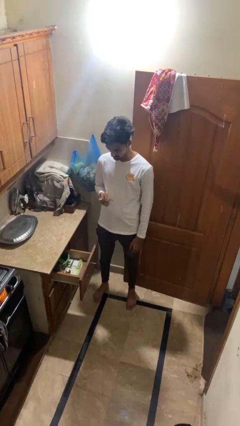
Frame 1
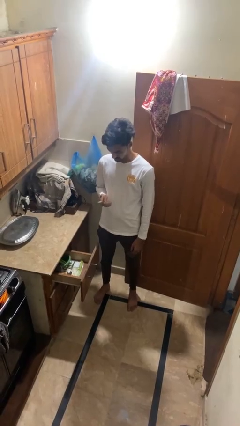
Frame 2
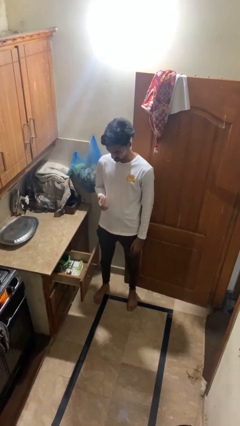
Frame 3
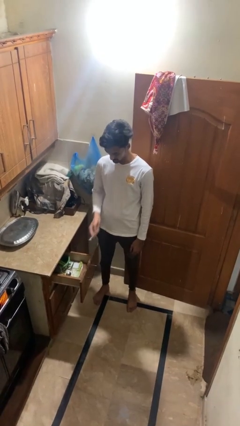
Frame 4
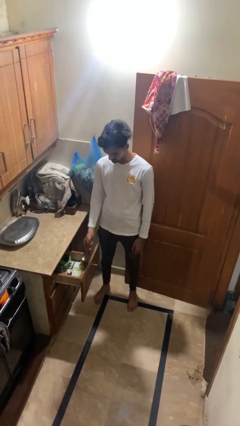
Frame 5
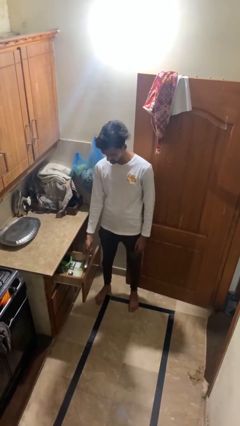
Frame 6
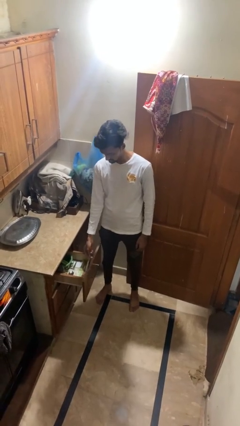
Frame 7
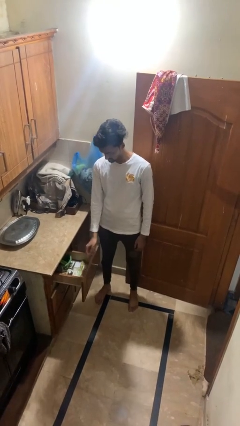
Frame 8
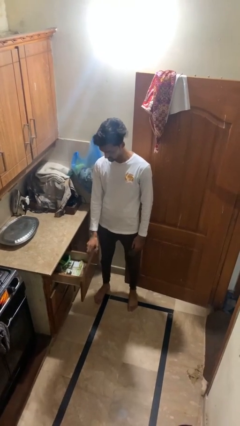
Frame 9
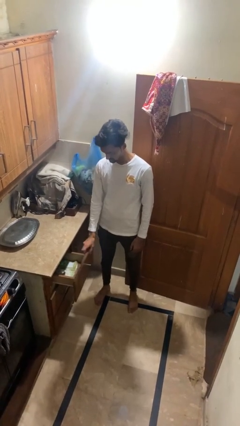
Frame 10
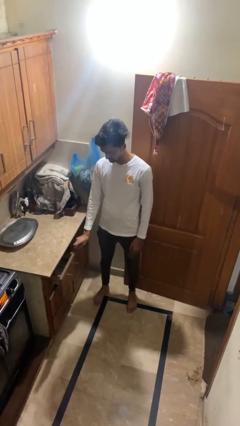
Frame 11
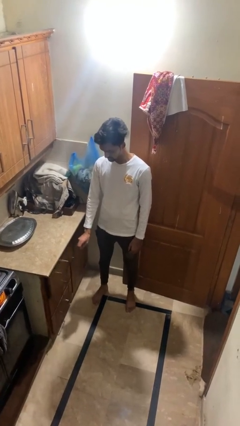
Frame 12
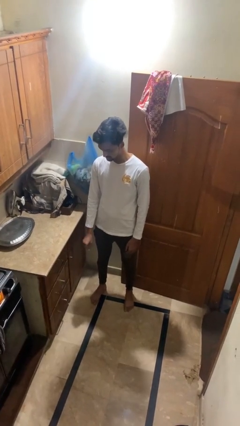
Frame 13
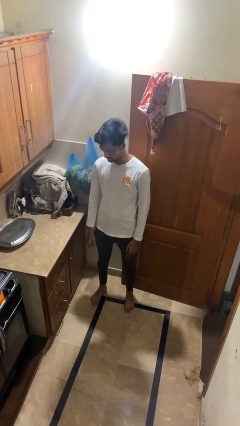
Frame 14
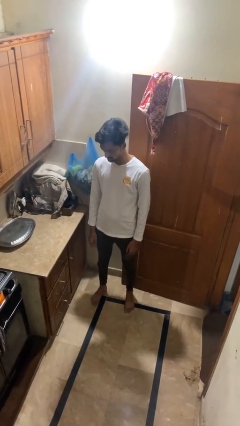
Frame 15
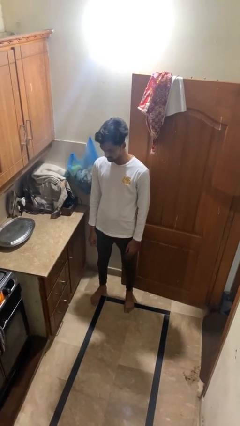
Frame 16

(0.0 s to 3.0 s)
person puts object into kitchen drawer

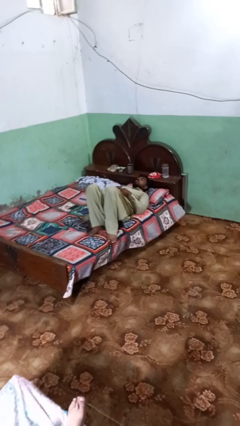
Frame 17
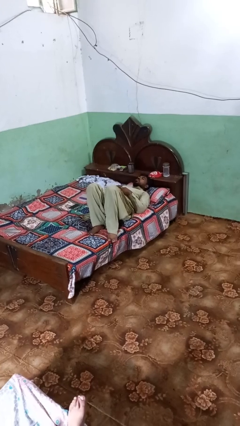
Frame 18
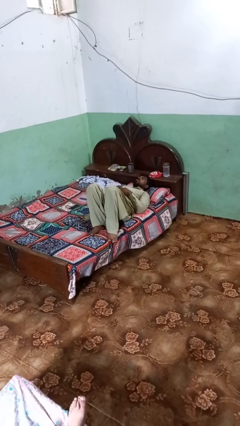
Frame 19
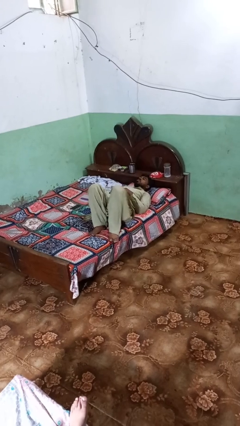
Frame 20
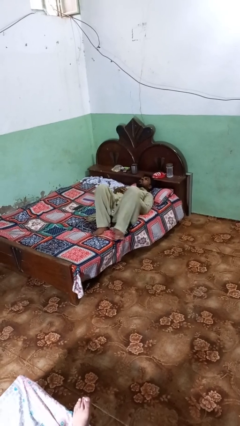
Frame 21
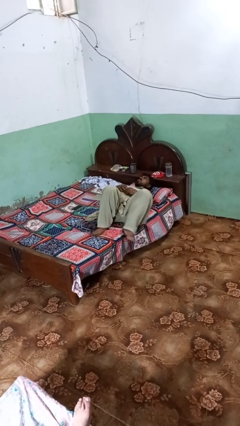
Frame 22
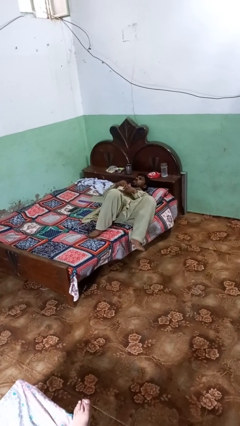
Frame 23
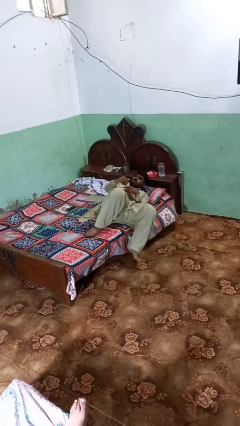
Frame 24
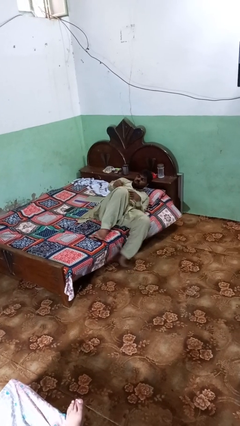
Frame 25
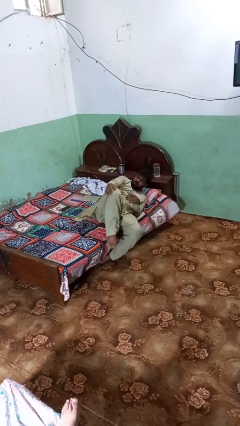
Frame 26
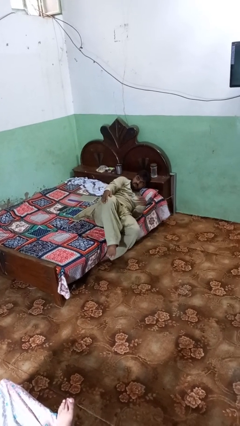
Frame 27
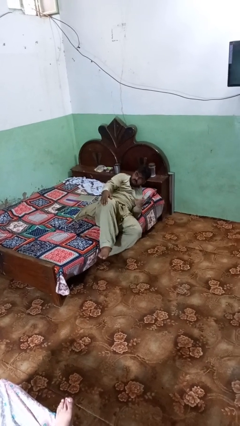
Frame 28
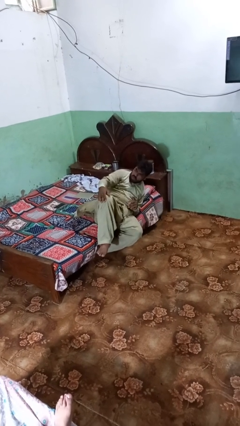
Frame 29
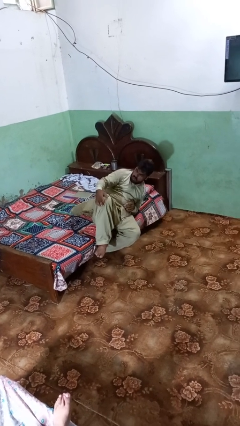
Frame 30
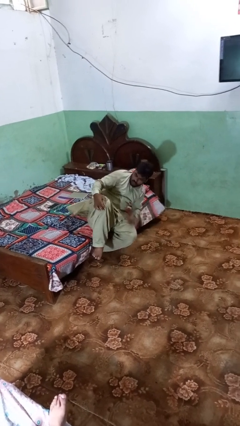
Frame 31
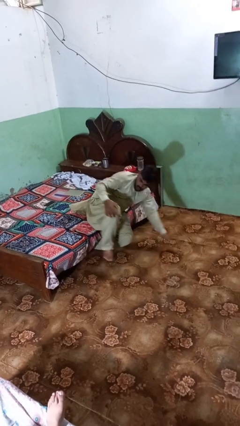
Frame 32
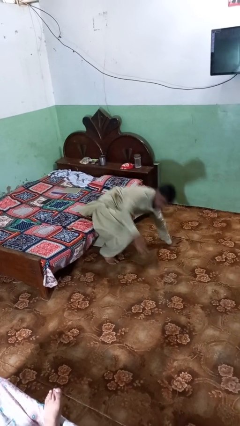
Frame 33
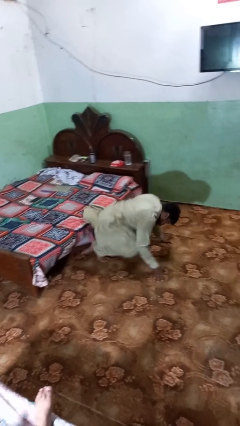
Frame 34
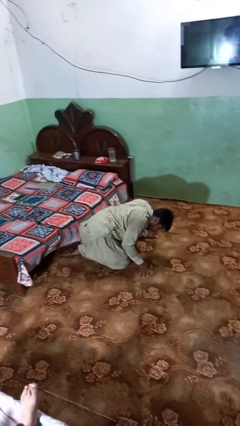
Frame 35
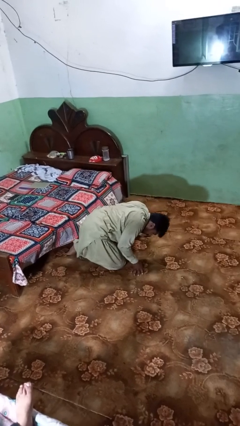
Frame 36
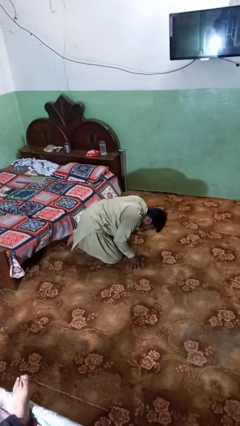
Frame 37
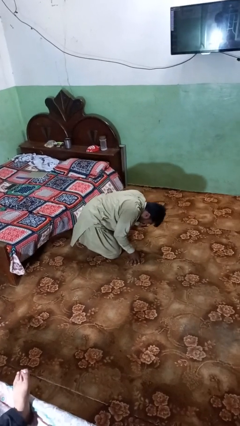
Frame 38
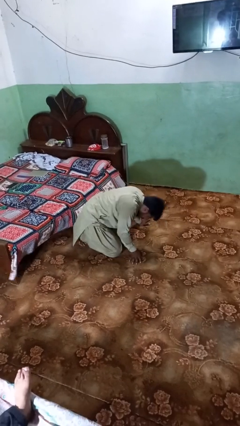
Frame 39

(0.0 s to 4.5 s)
person falls from bed

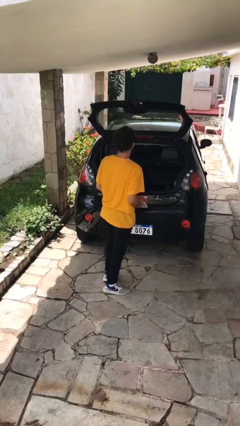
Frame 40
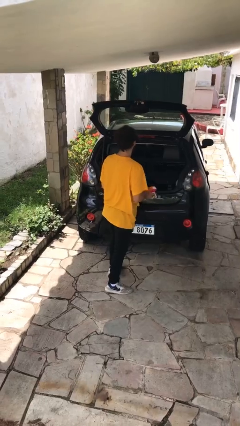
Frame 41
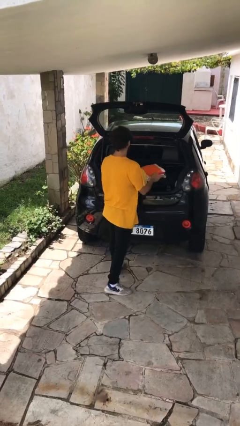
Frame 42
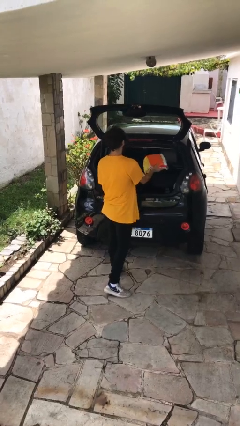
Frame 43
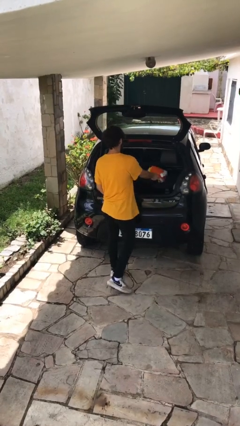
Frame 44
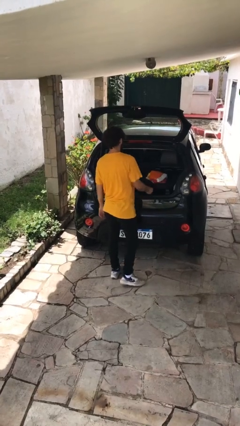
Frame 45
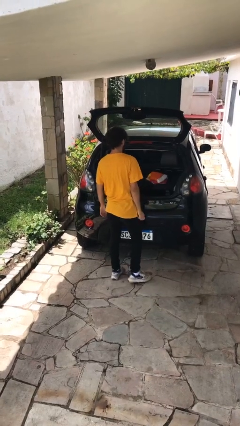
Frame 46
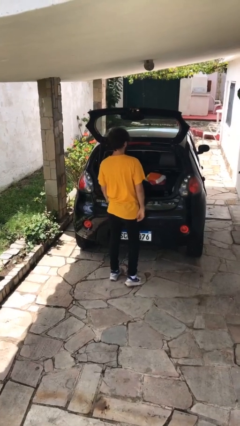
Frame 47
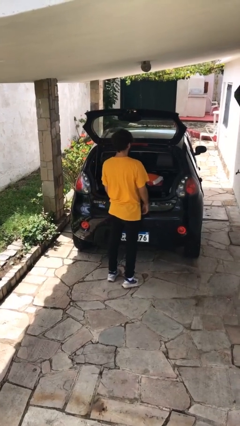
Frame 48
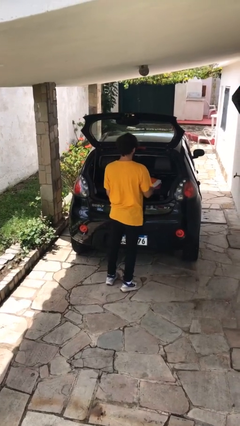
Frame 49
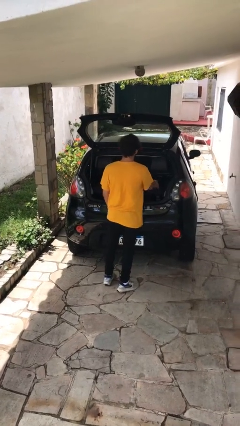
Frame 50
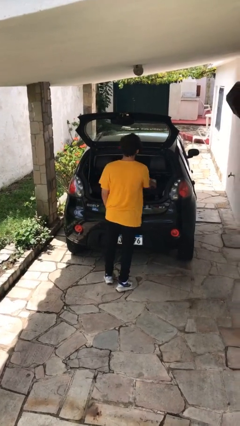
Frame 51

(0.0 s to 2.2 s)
person loads car

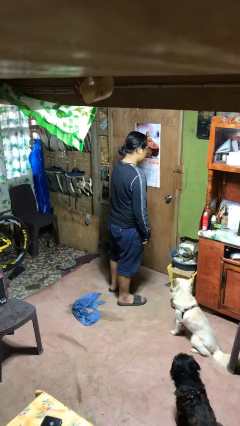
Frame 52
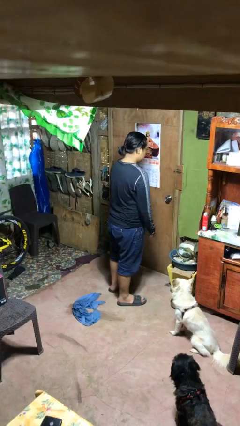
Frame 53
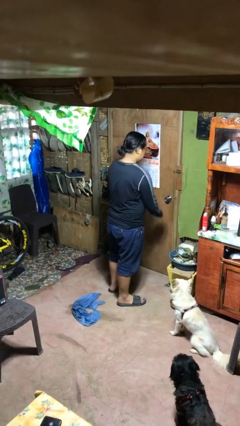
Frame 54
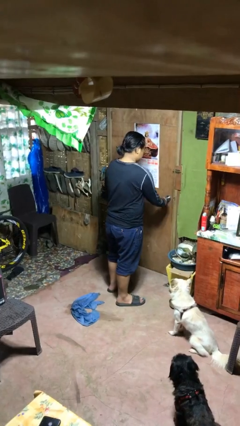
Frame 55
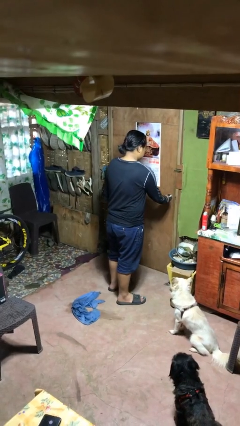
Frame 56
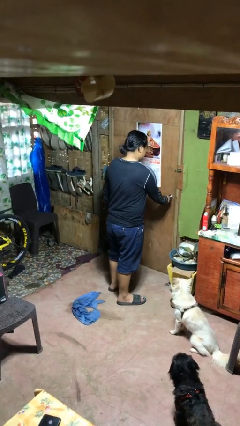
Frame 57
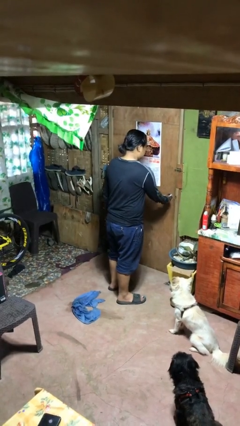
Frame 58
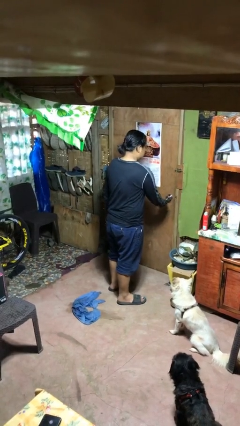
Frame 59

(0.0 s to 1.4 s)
person locks door with keys

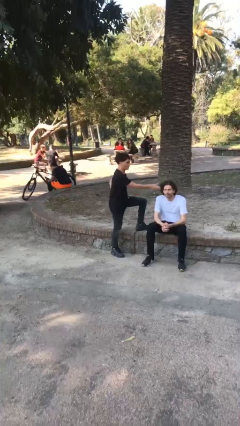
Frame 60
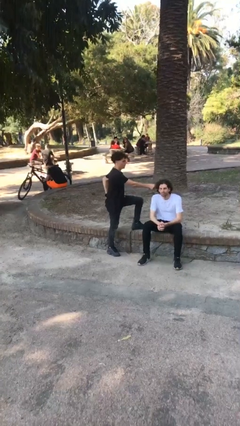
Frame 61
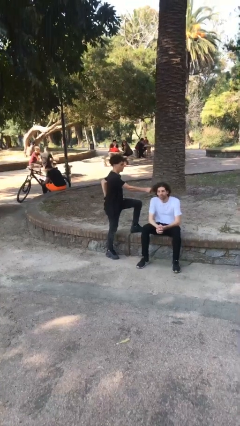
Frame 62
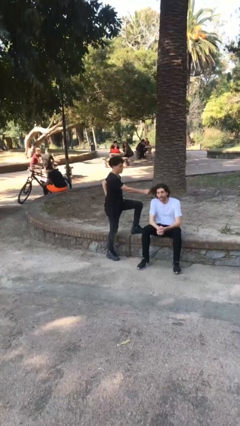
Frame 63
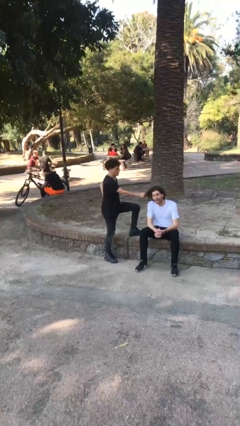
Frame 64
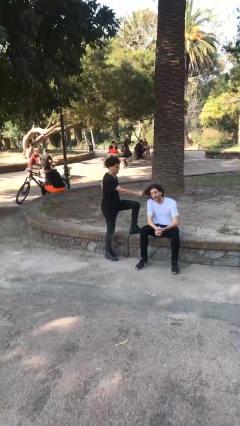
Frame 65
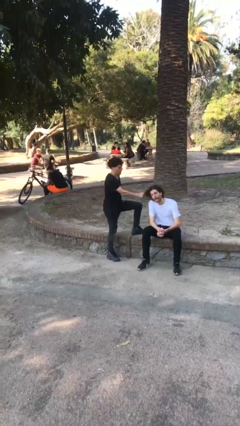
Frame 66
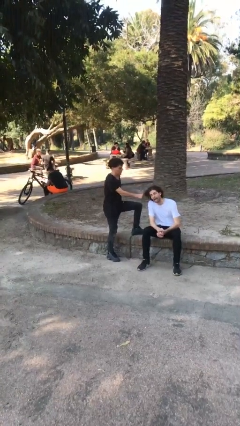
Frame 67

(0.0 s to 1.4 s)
person grabs person by hair

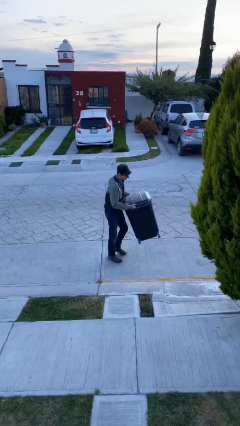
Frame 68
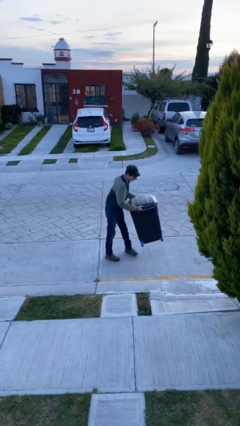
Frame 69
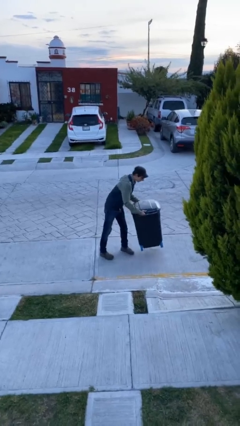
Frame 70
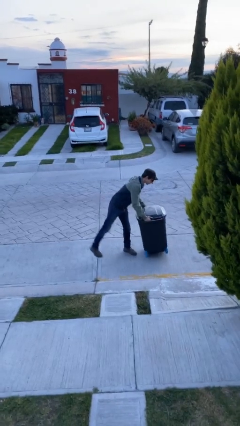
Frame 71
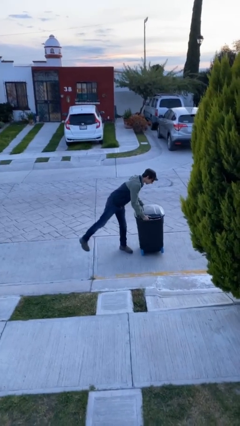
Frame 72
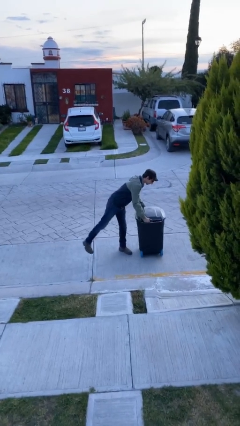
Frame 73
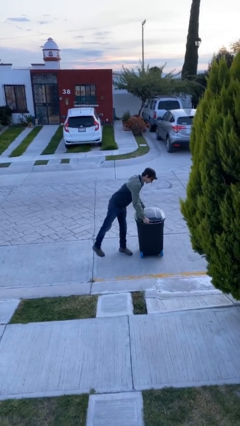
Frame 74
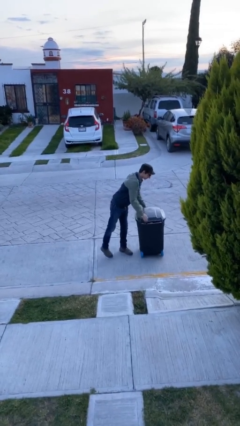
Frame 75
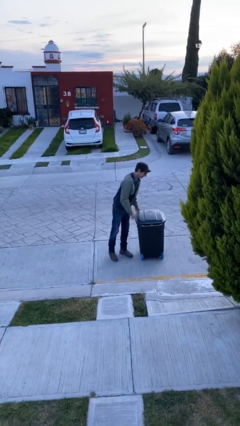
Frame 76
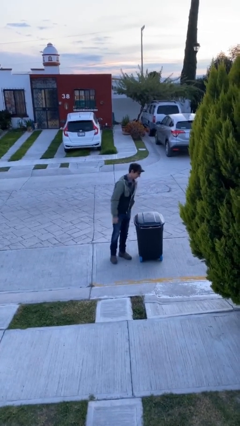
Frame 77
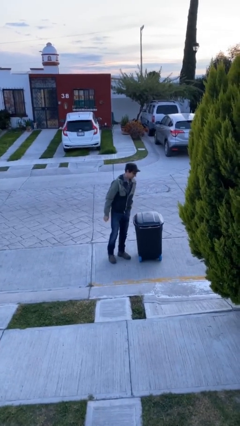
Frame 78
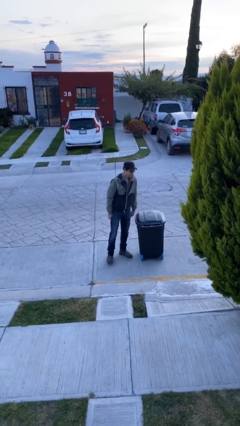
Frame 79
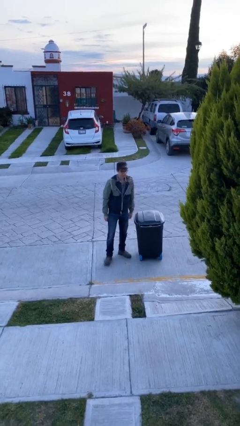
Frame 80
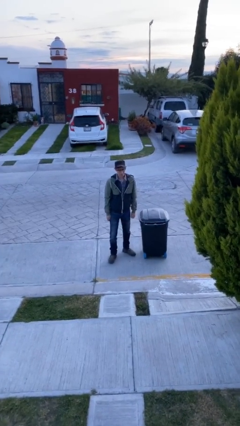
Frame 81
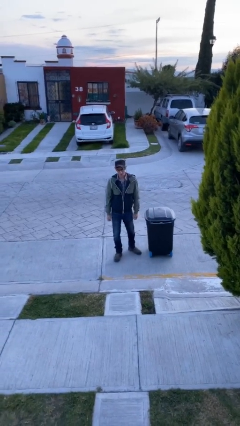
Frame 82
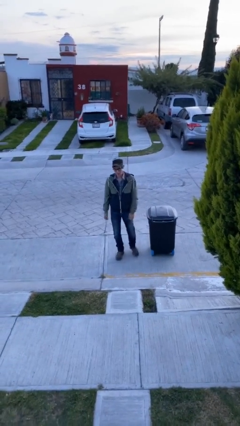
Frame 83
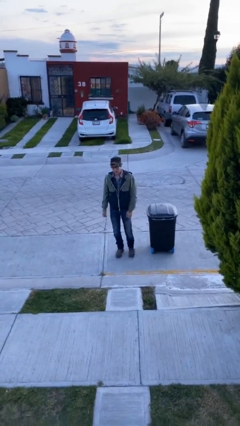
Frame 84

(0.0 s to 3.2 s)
person puts down object on floor

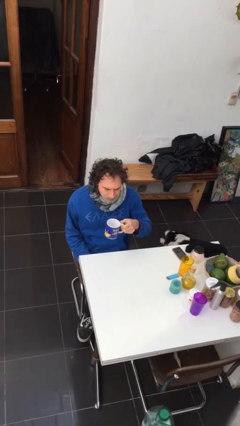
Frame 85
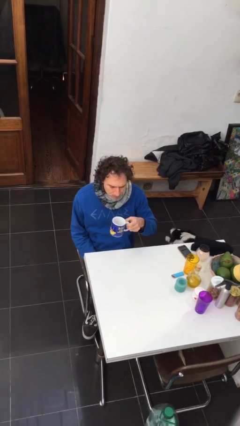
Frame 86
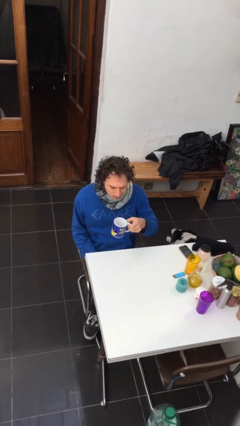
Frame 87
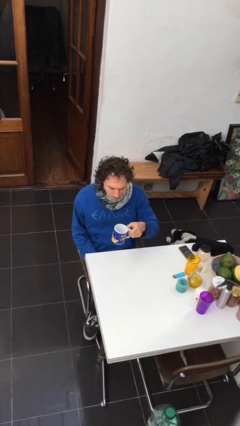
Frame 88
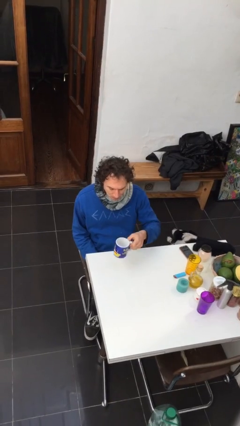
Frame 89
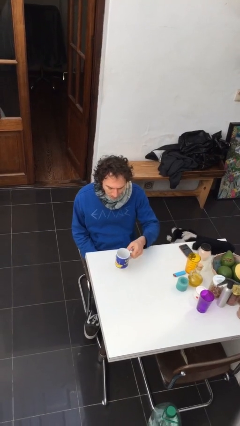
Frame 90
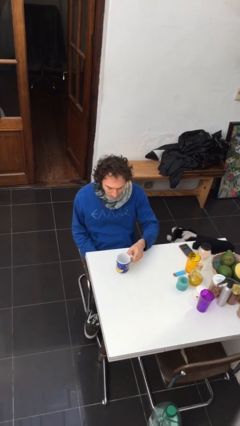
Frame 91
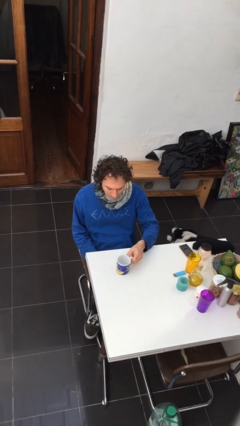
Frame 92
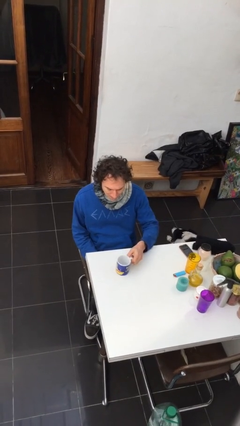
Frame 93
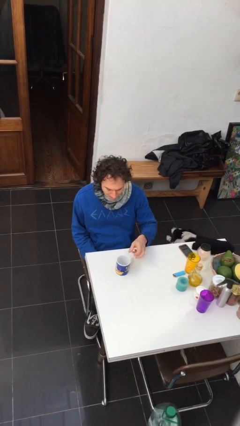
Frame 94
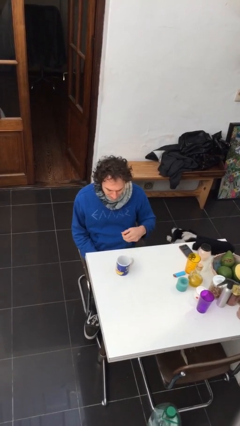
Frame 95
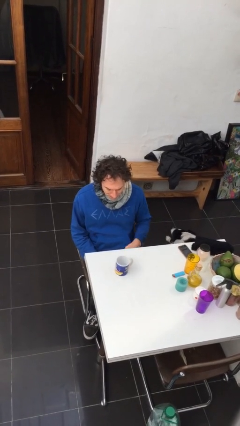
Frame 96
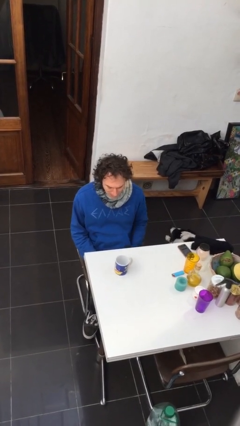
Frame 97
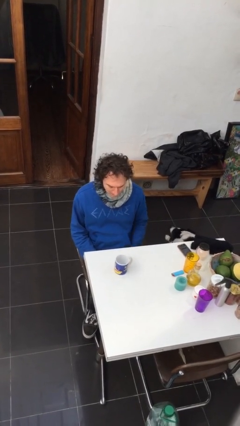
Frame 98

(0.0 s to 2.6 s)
person puts down object on table
